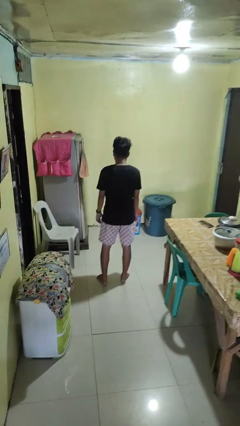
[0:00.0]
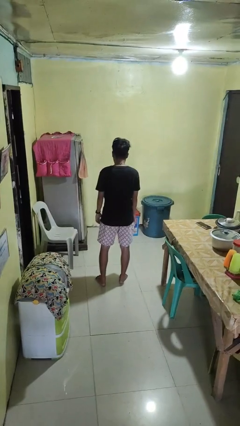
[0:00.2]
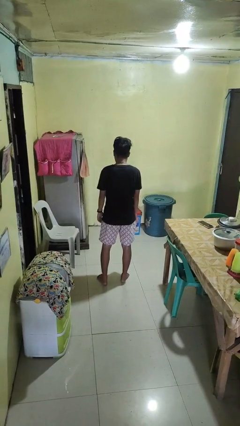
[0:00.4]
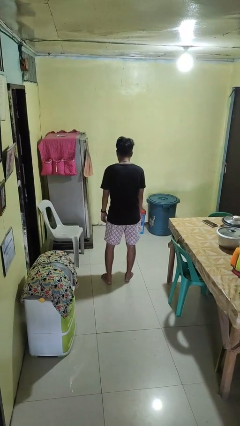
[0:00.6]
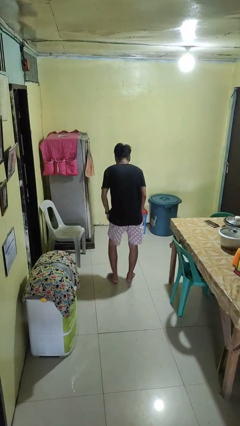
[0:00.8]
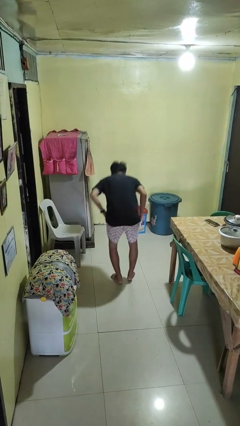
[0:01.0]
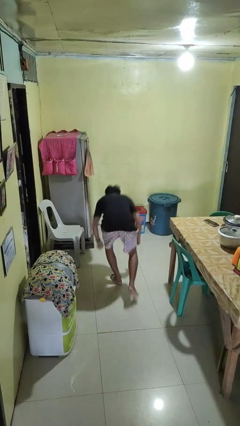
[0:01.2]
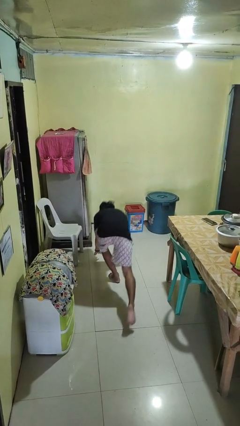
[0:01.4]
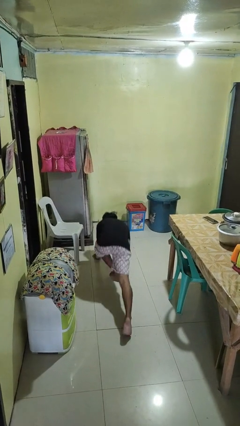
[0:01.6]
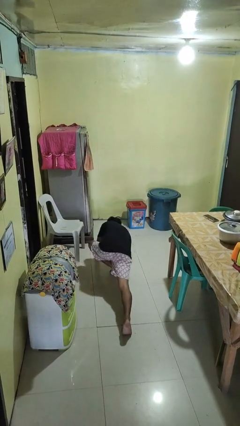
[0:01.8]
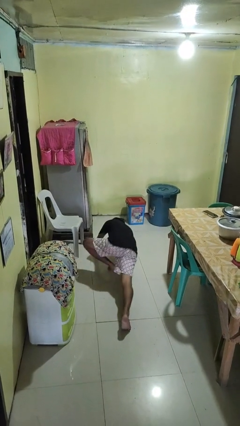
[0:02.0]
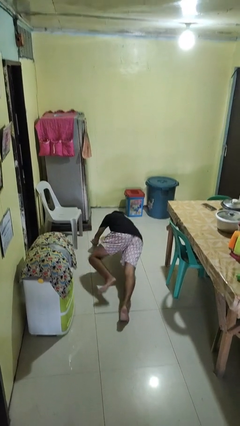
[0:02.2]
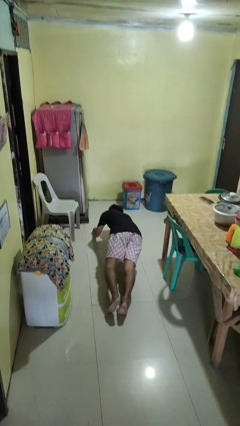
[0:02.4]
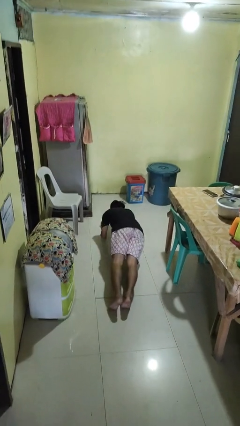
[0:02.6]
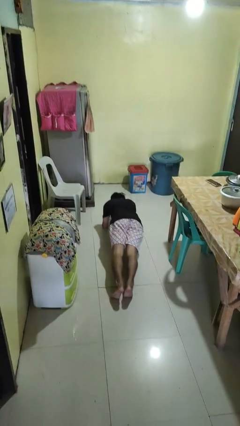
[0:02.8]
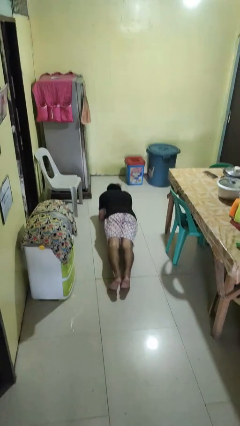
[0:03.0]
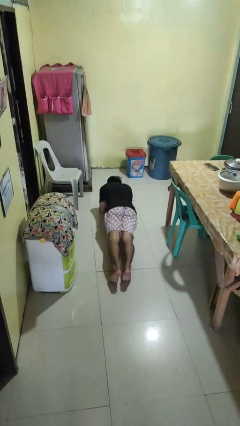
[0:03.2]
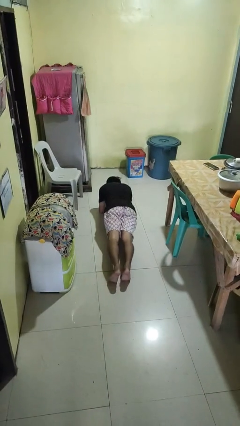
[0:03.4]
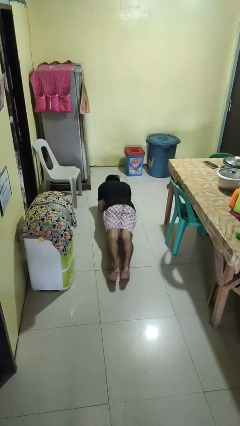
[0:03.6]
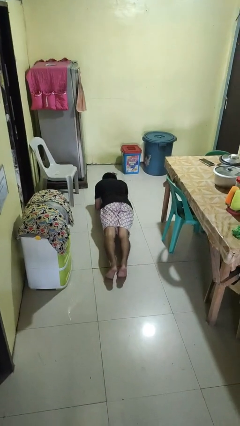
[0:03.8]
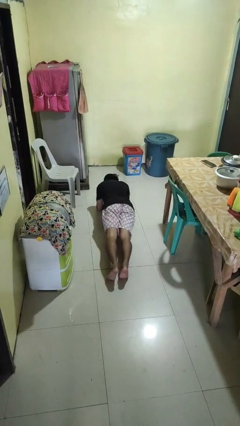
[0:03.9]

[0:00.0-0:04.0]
person exercises with plank

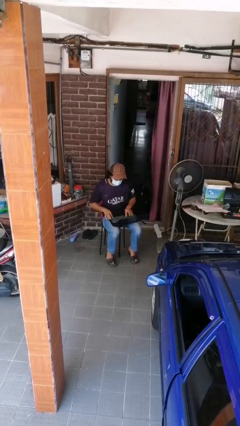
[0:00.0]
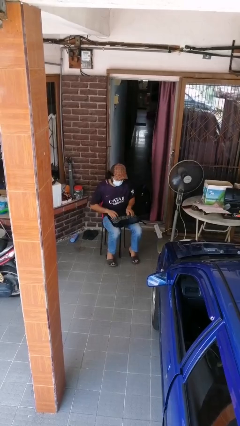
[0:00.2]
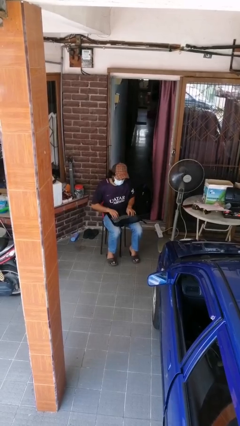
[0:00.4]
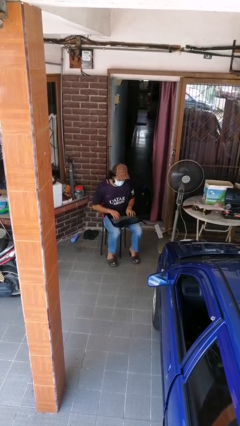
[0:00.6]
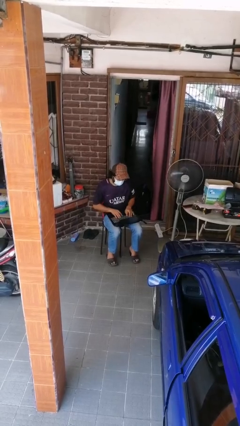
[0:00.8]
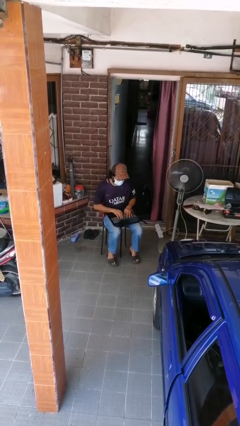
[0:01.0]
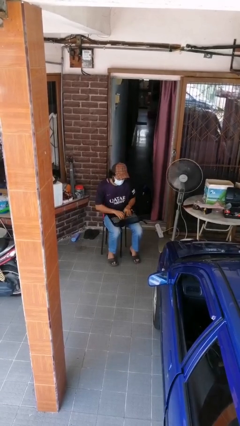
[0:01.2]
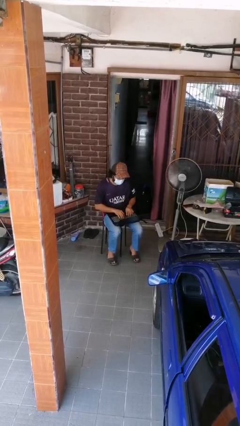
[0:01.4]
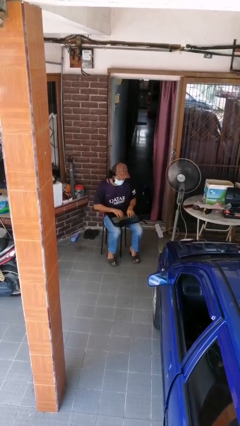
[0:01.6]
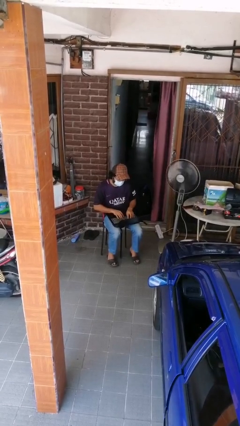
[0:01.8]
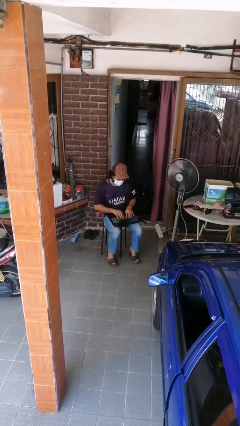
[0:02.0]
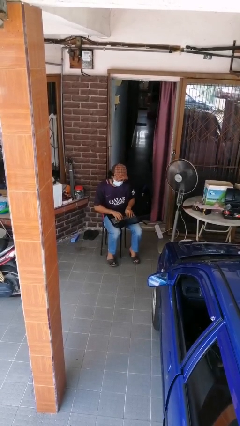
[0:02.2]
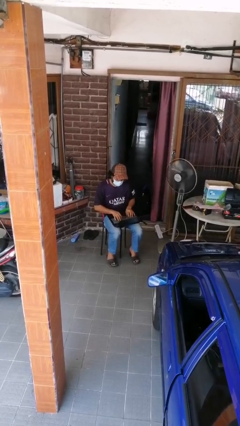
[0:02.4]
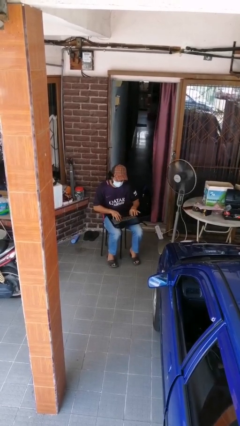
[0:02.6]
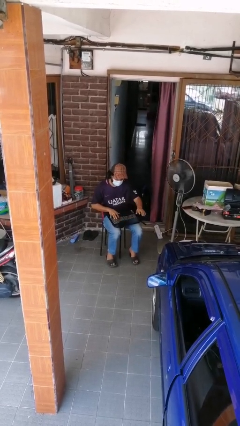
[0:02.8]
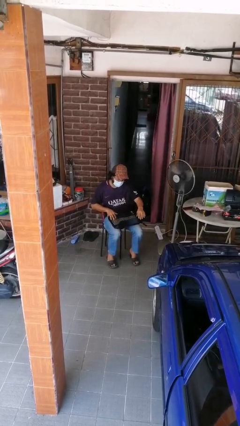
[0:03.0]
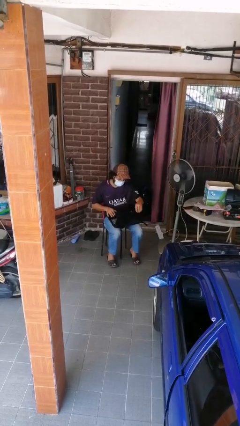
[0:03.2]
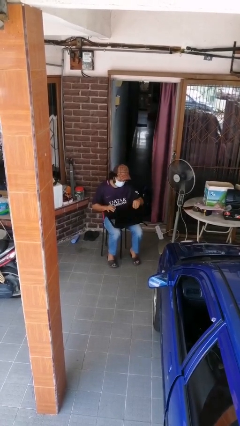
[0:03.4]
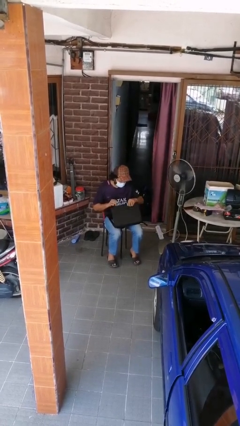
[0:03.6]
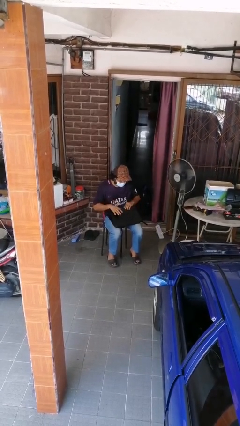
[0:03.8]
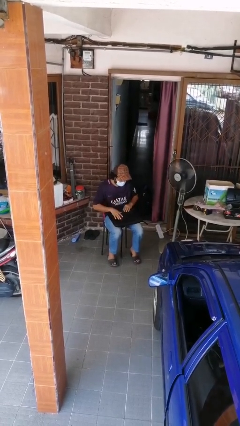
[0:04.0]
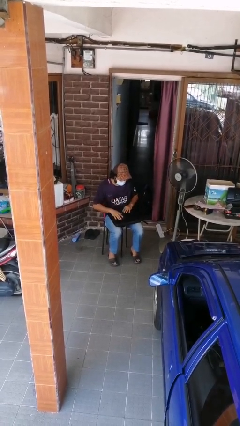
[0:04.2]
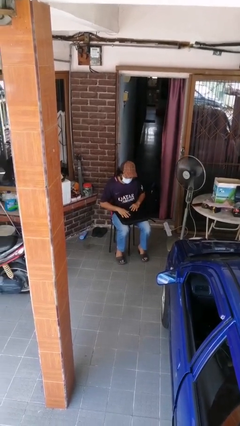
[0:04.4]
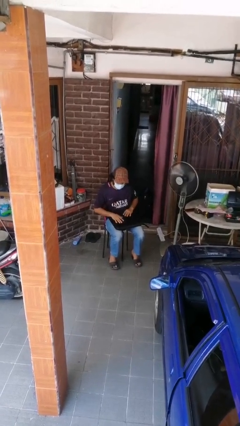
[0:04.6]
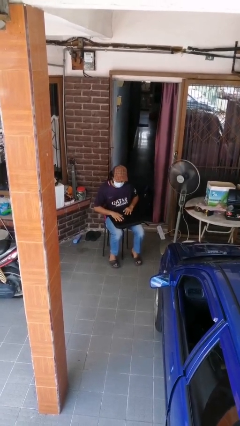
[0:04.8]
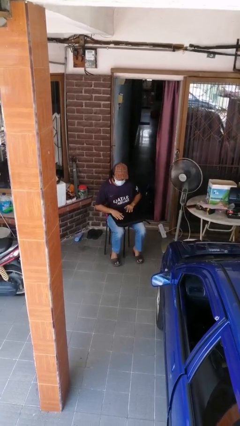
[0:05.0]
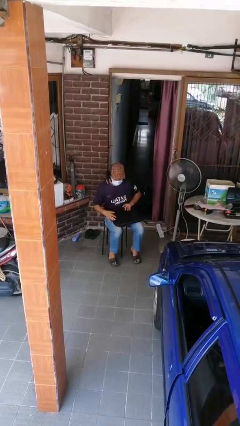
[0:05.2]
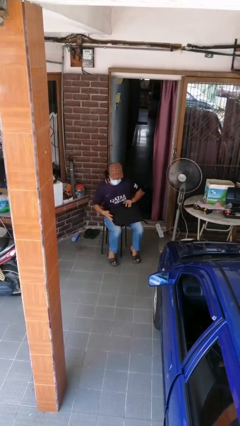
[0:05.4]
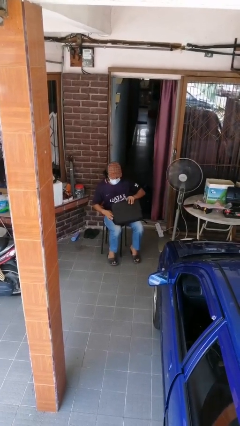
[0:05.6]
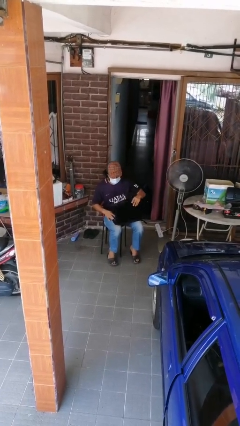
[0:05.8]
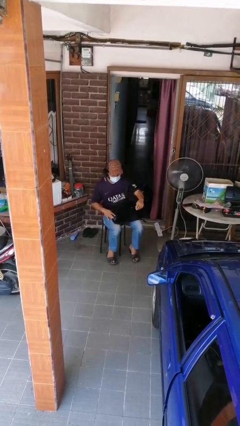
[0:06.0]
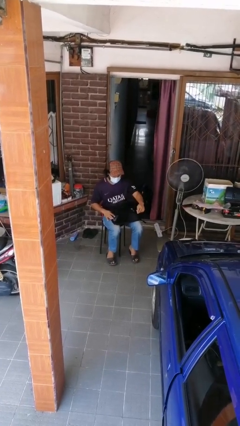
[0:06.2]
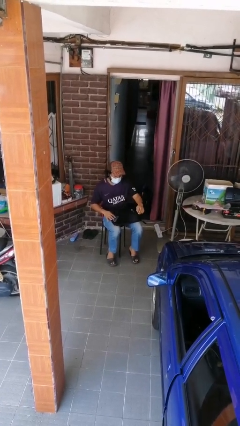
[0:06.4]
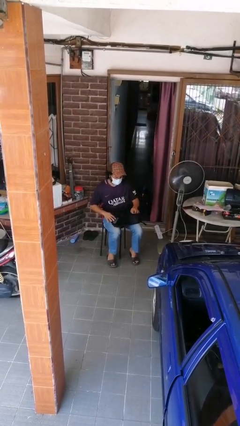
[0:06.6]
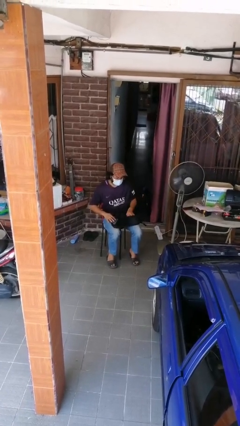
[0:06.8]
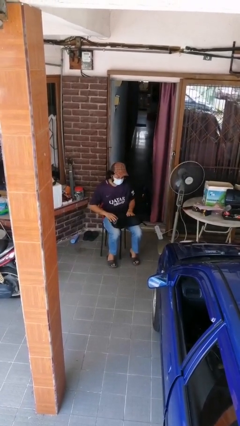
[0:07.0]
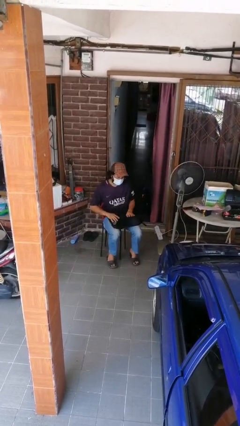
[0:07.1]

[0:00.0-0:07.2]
person interacts with laptop

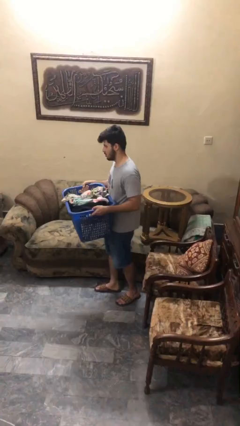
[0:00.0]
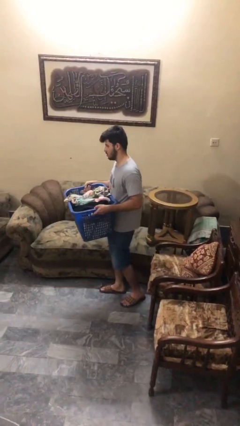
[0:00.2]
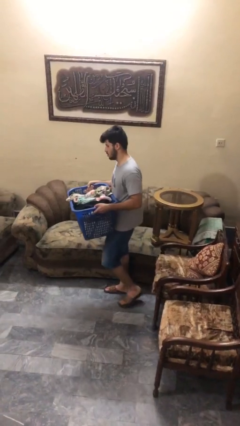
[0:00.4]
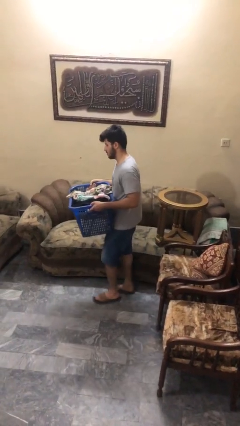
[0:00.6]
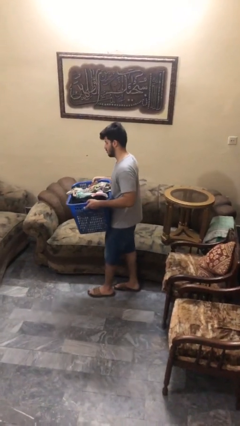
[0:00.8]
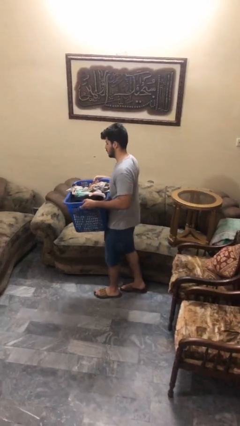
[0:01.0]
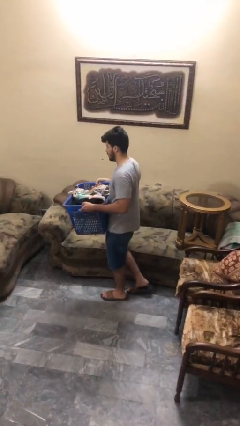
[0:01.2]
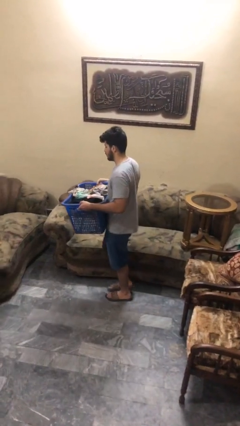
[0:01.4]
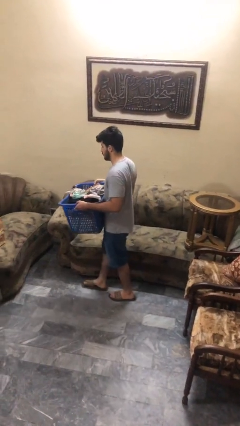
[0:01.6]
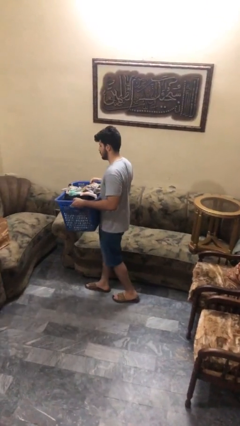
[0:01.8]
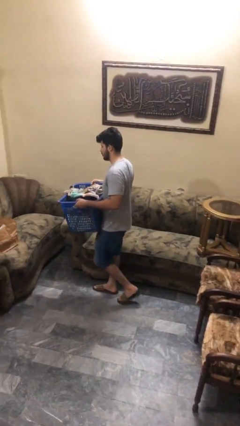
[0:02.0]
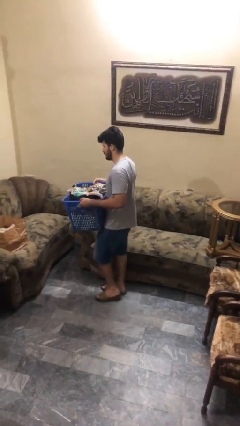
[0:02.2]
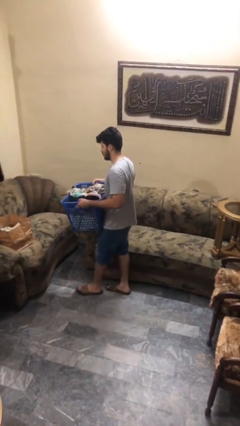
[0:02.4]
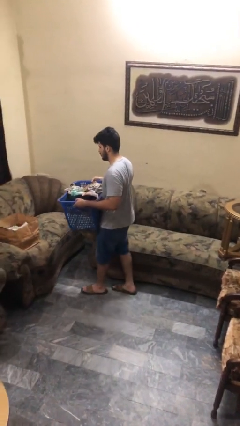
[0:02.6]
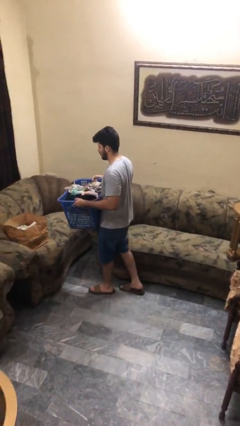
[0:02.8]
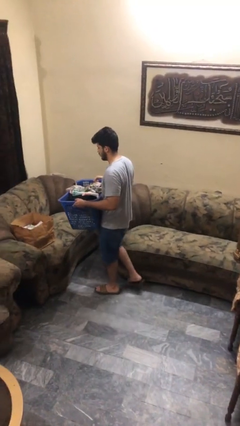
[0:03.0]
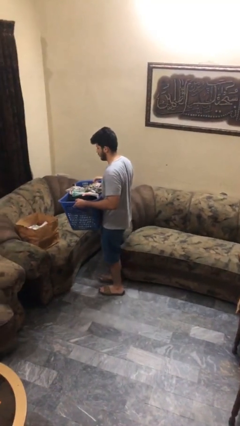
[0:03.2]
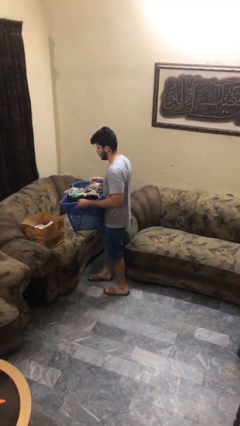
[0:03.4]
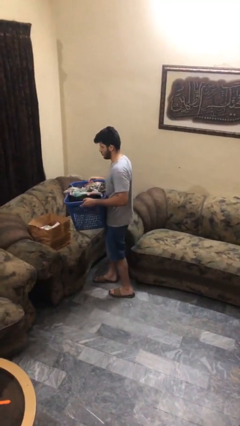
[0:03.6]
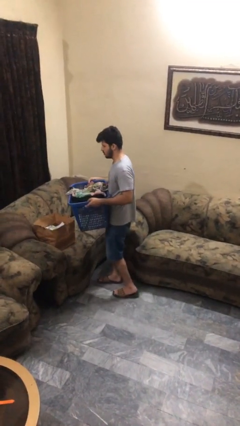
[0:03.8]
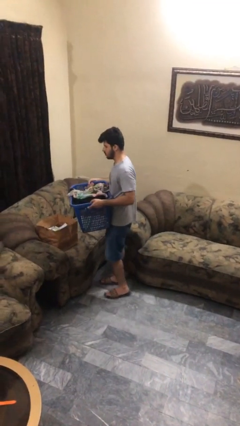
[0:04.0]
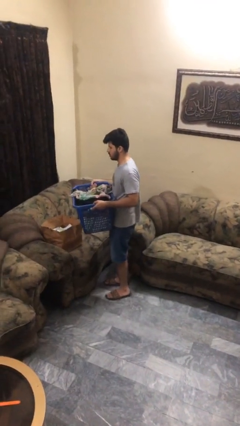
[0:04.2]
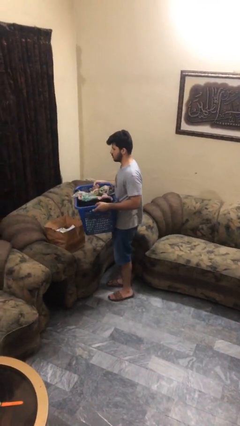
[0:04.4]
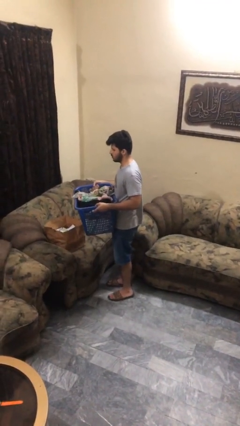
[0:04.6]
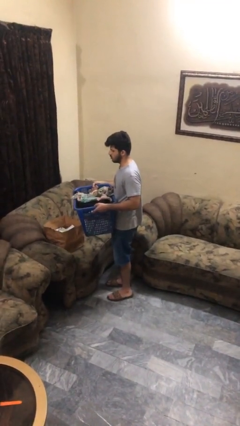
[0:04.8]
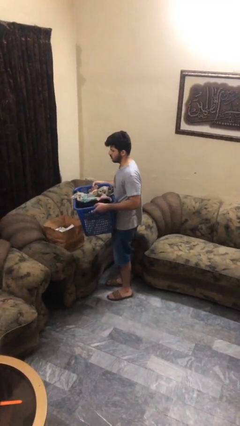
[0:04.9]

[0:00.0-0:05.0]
person carries laundry basket

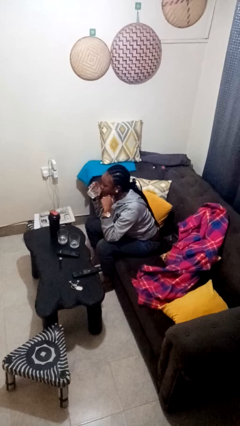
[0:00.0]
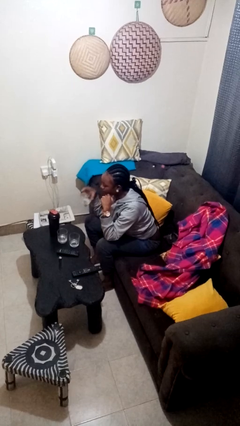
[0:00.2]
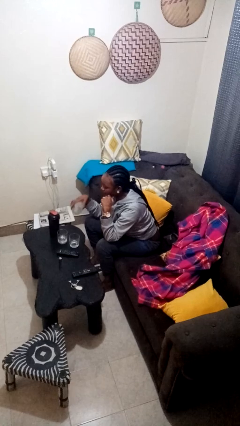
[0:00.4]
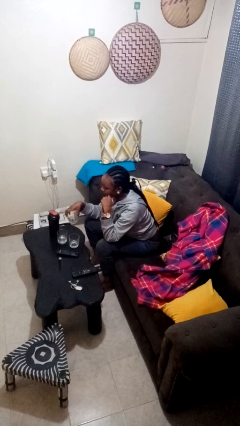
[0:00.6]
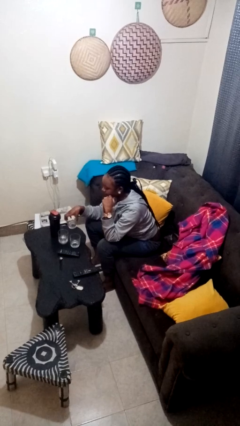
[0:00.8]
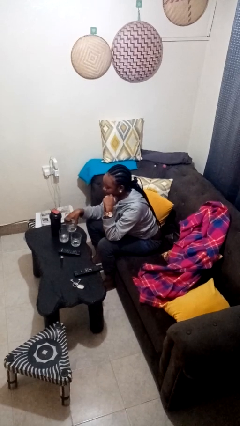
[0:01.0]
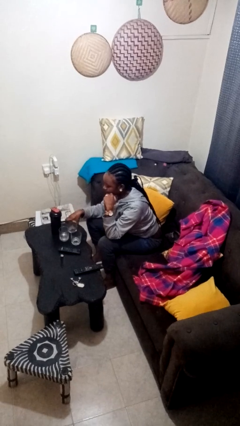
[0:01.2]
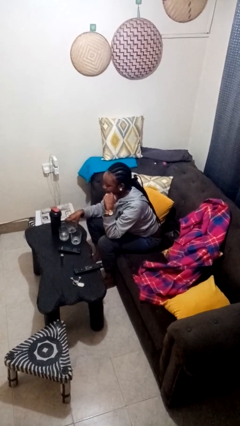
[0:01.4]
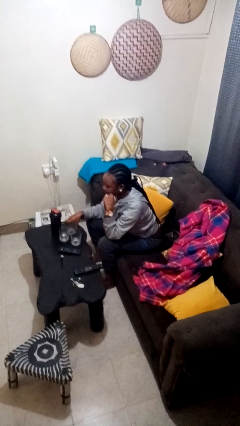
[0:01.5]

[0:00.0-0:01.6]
person puts down object on table
